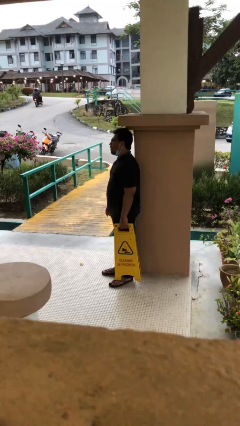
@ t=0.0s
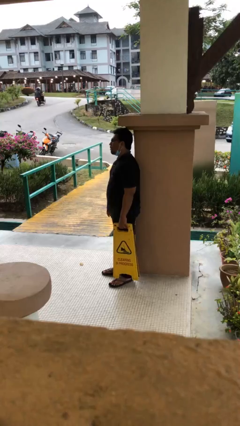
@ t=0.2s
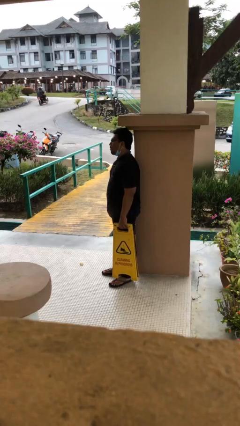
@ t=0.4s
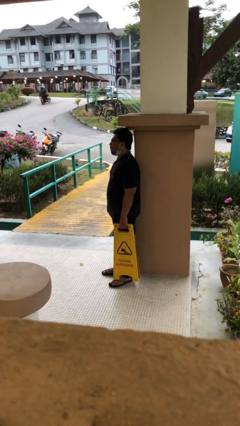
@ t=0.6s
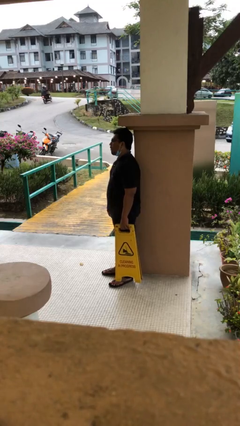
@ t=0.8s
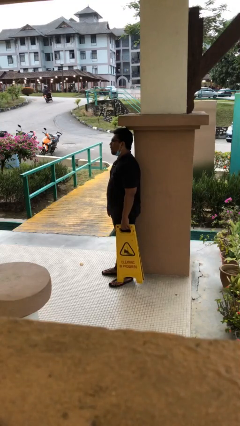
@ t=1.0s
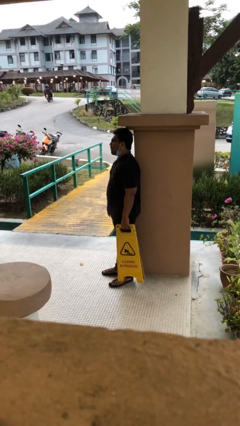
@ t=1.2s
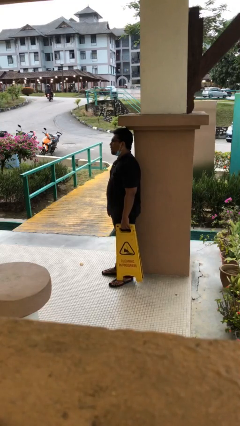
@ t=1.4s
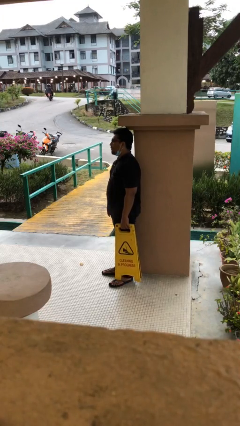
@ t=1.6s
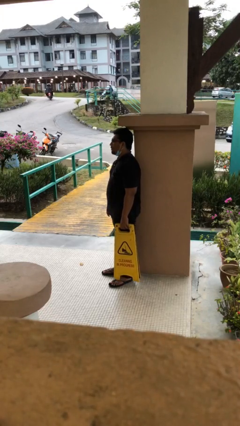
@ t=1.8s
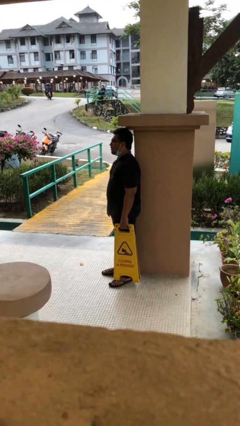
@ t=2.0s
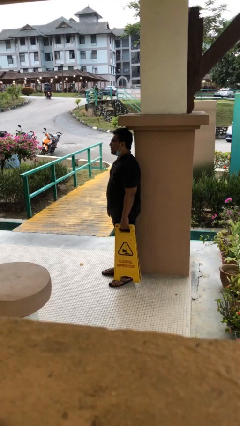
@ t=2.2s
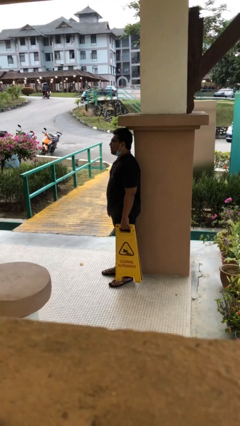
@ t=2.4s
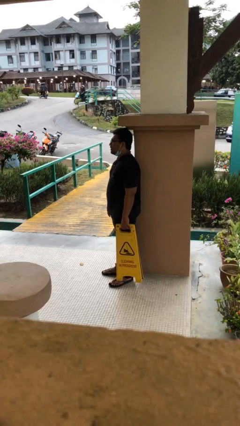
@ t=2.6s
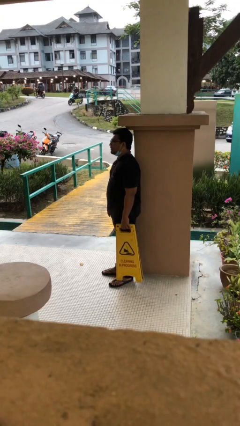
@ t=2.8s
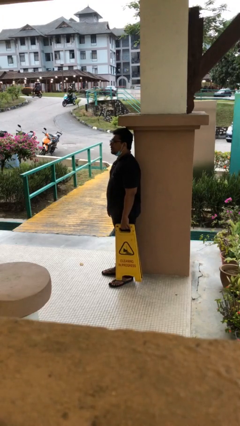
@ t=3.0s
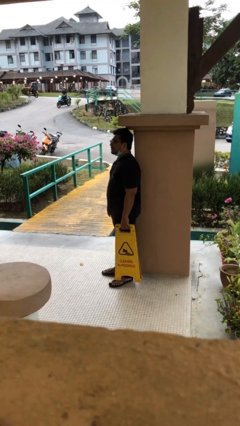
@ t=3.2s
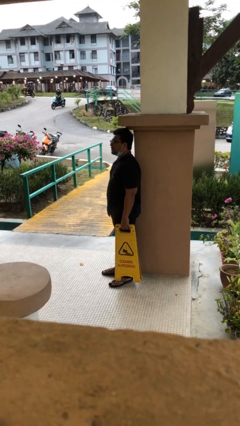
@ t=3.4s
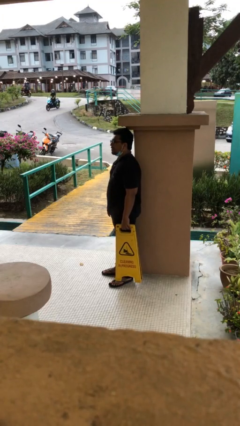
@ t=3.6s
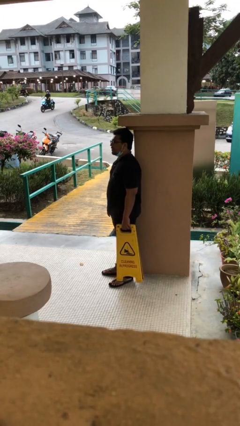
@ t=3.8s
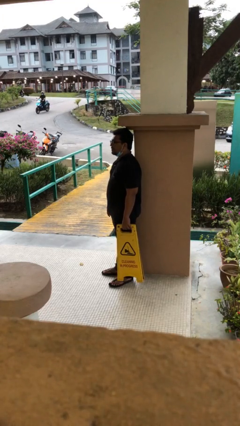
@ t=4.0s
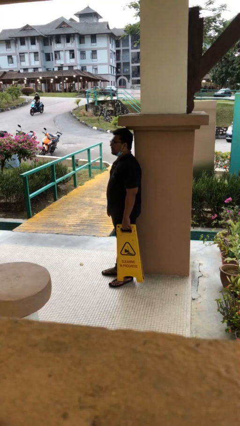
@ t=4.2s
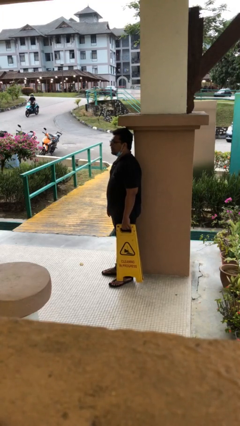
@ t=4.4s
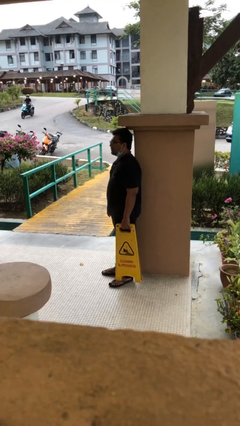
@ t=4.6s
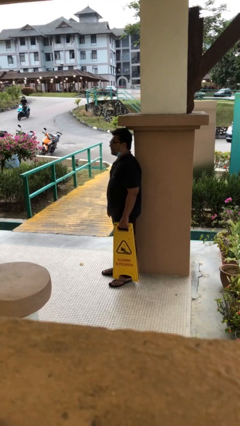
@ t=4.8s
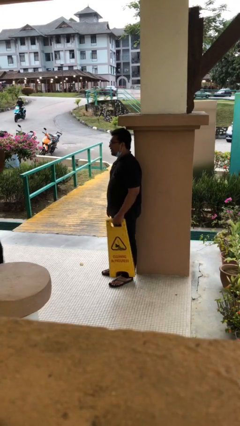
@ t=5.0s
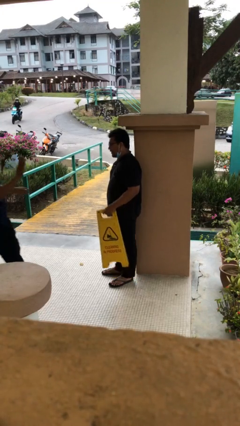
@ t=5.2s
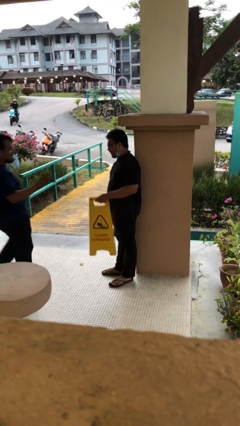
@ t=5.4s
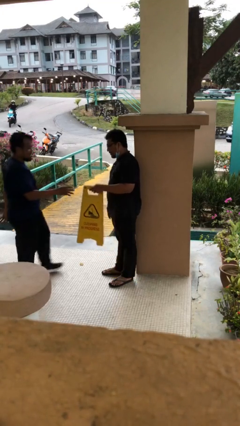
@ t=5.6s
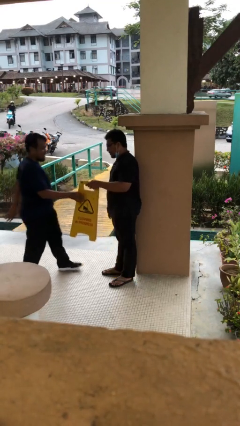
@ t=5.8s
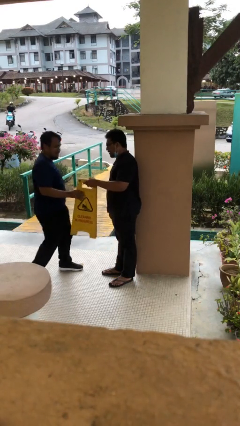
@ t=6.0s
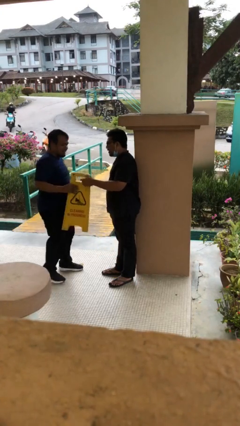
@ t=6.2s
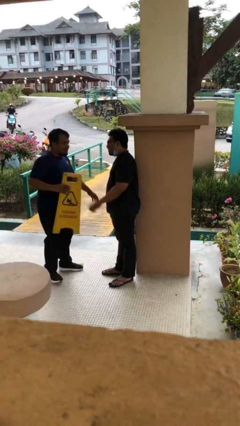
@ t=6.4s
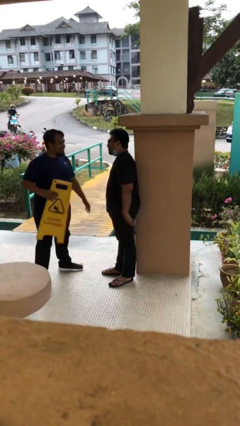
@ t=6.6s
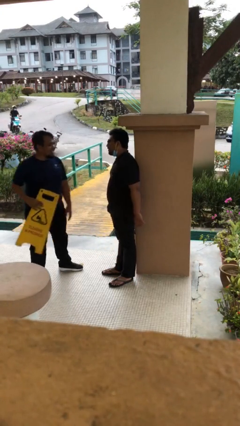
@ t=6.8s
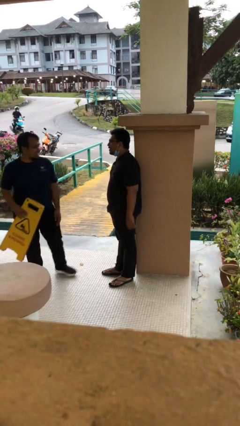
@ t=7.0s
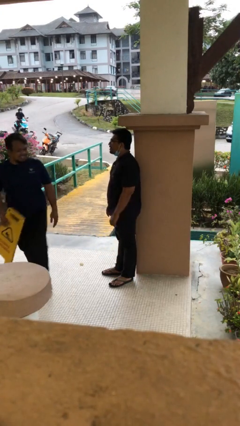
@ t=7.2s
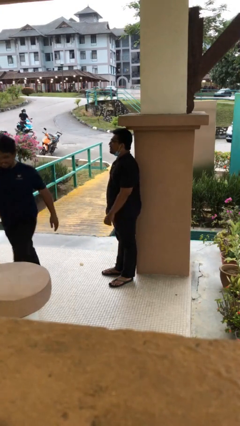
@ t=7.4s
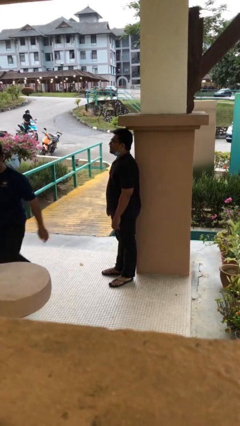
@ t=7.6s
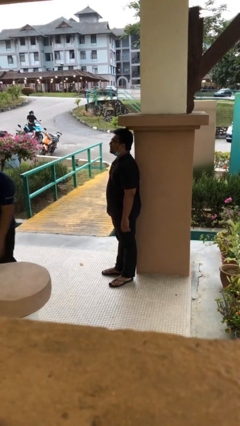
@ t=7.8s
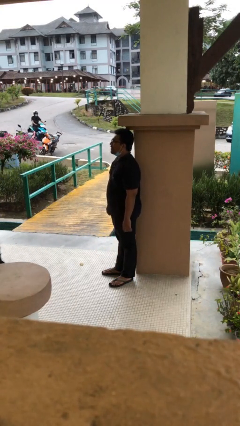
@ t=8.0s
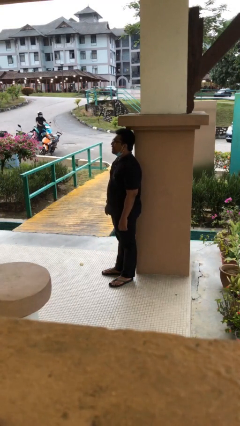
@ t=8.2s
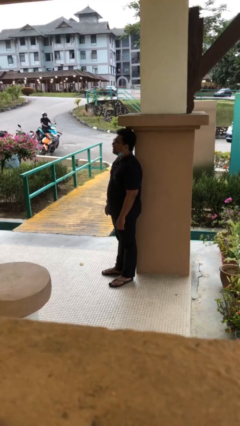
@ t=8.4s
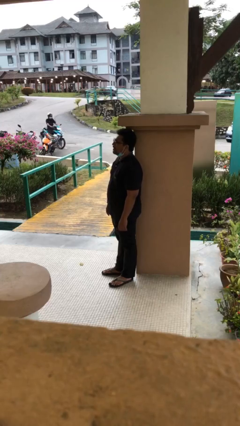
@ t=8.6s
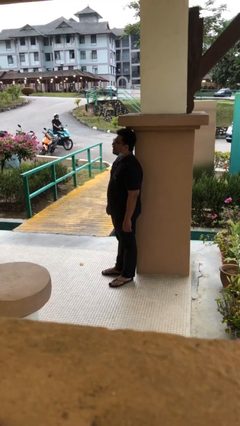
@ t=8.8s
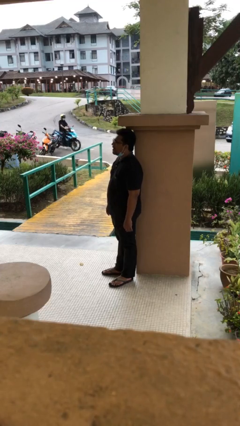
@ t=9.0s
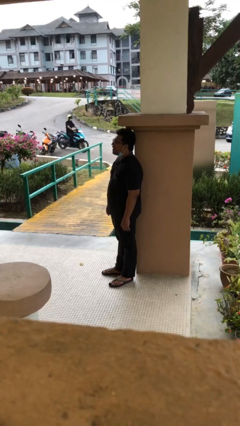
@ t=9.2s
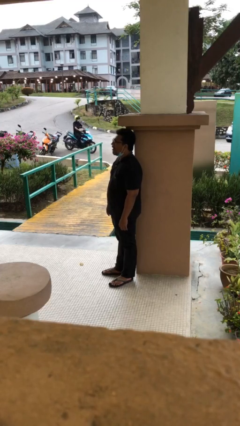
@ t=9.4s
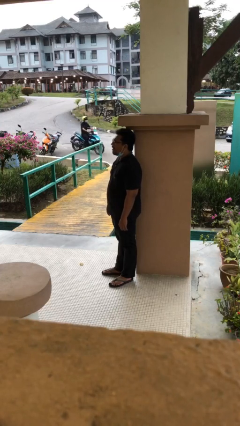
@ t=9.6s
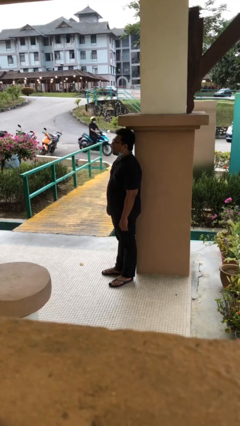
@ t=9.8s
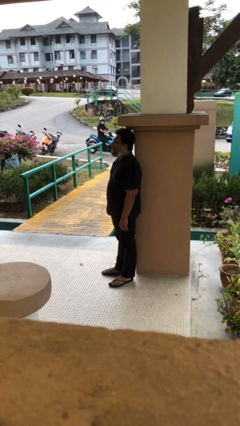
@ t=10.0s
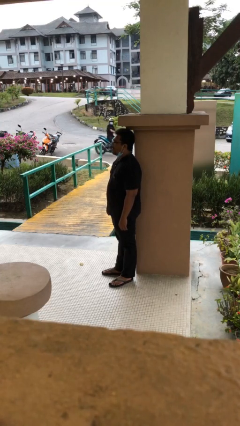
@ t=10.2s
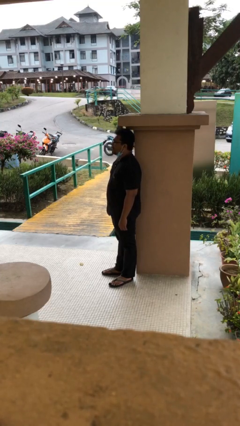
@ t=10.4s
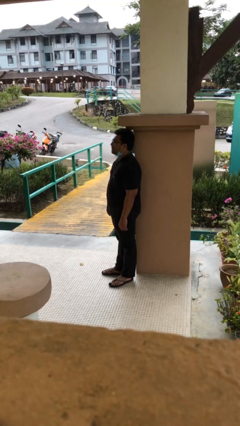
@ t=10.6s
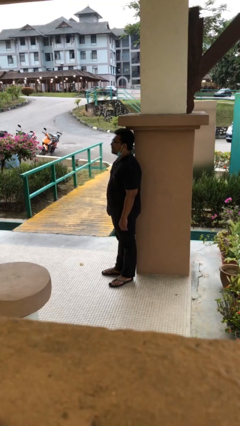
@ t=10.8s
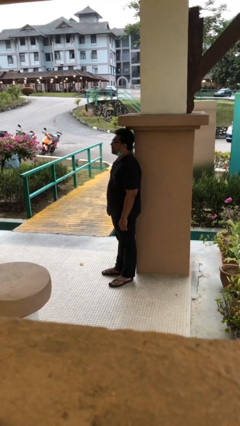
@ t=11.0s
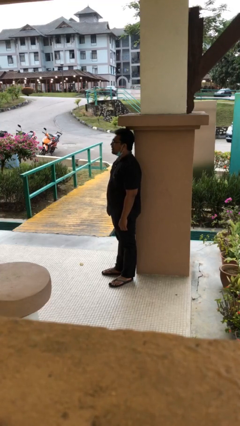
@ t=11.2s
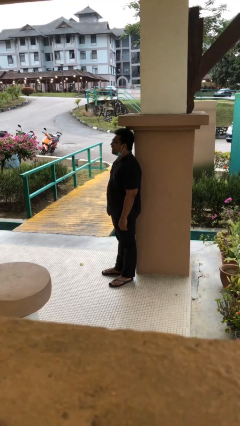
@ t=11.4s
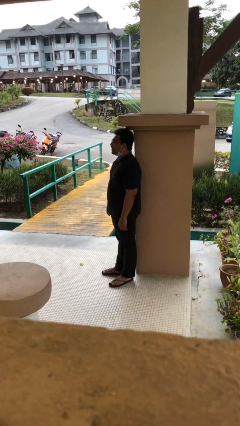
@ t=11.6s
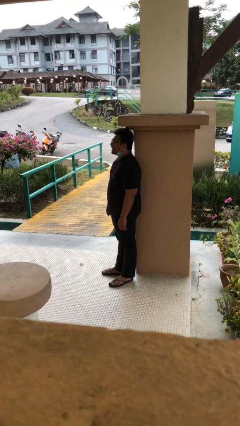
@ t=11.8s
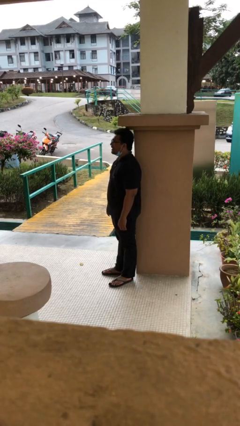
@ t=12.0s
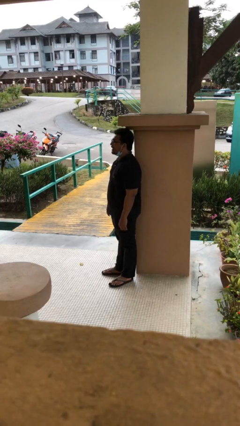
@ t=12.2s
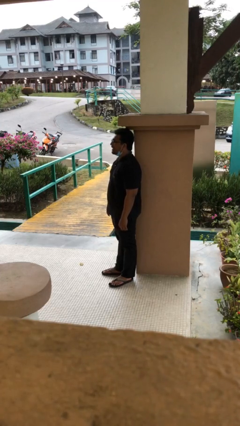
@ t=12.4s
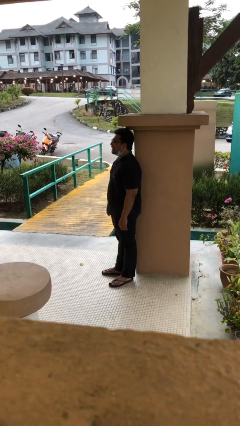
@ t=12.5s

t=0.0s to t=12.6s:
person transfers object to person

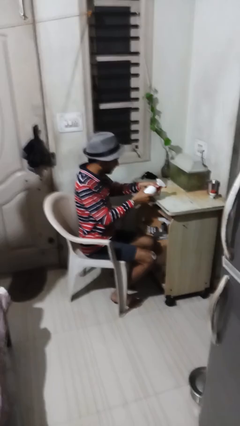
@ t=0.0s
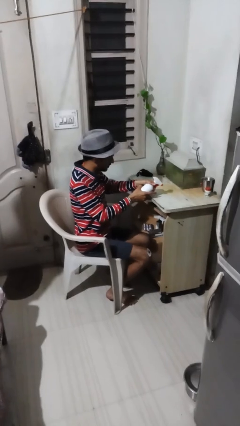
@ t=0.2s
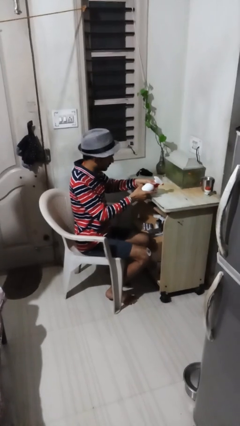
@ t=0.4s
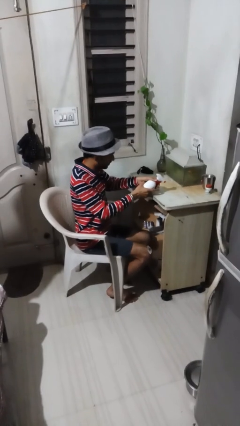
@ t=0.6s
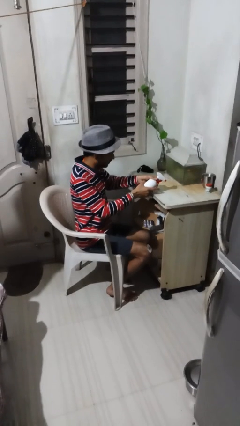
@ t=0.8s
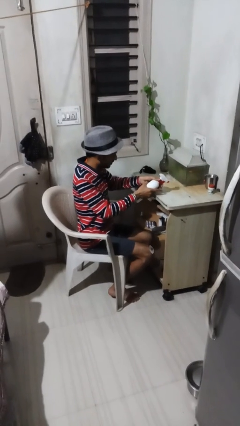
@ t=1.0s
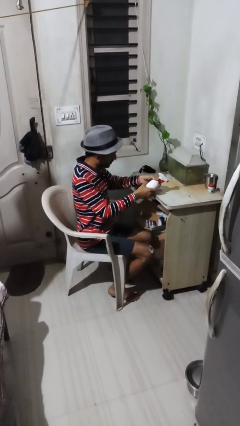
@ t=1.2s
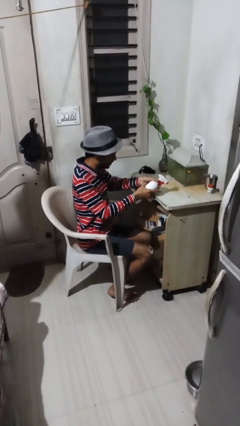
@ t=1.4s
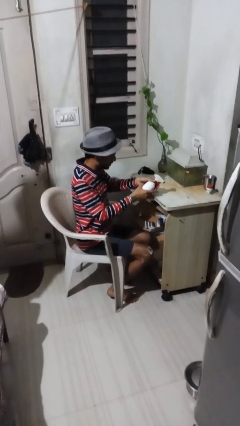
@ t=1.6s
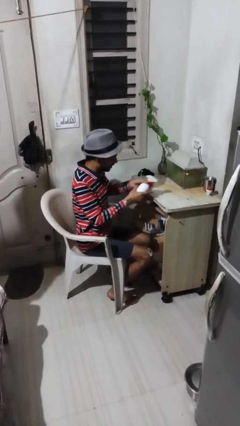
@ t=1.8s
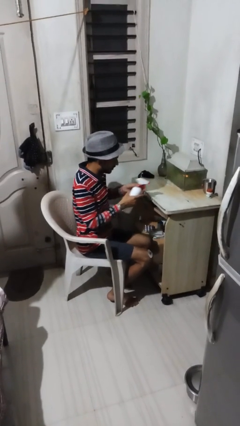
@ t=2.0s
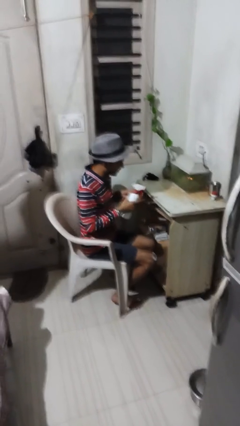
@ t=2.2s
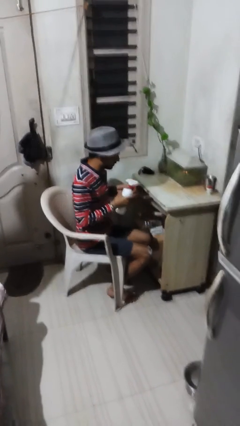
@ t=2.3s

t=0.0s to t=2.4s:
person sprays from bottle

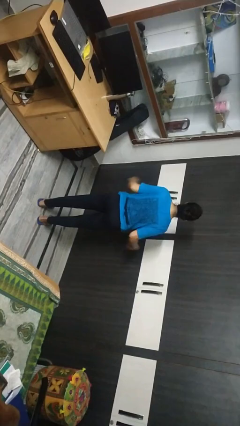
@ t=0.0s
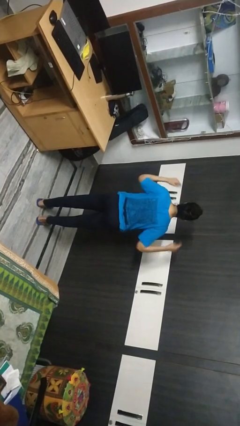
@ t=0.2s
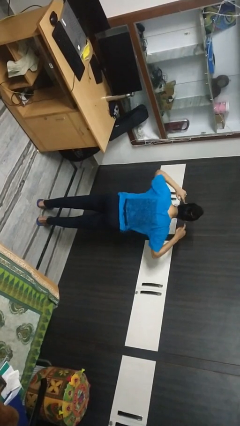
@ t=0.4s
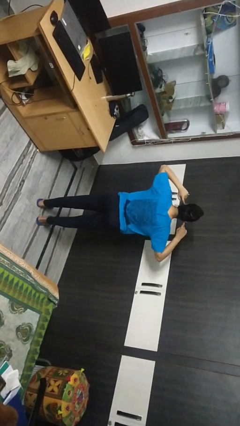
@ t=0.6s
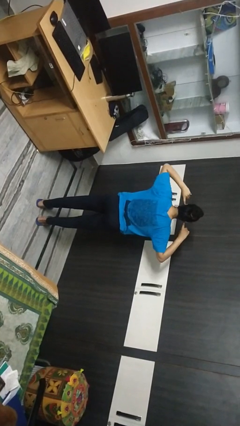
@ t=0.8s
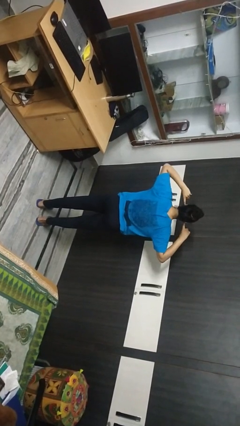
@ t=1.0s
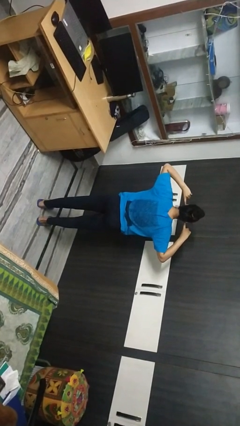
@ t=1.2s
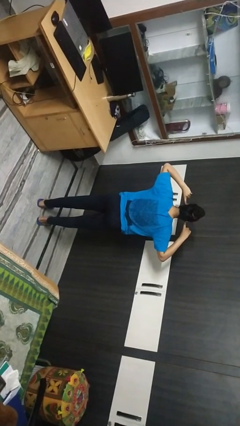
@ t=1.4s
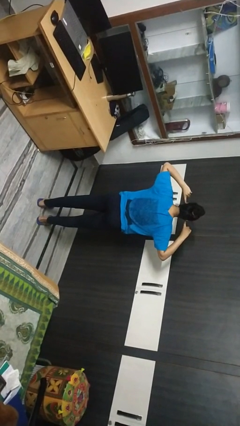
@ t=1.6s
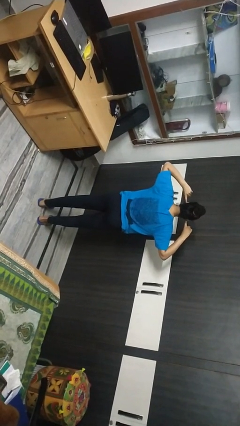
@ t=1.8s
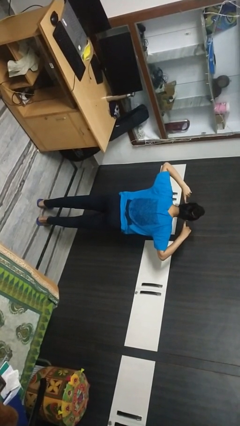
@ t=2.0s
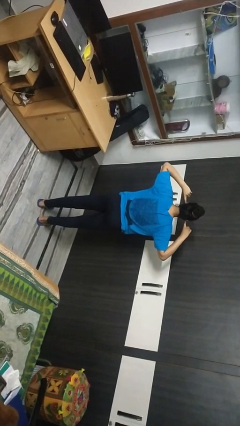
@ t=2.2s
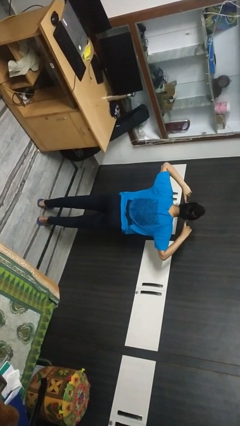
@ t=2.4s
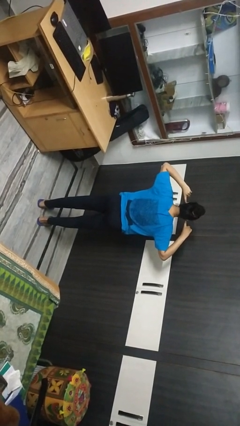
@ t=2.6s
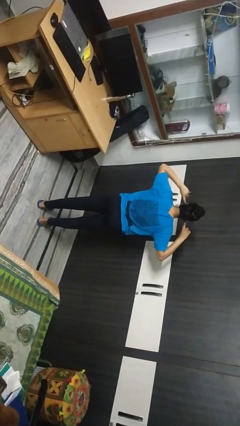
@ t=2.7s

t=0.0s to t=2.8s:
person puts fingers in ear

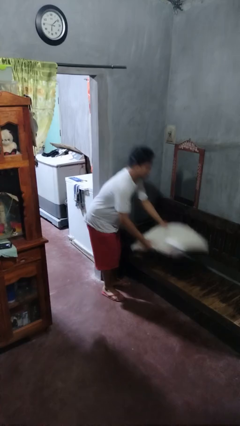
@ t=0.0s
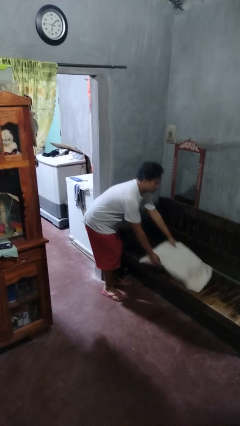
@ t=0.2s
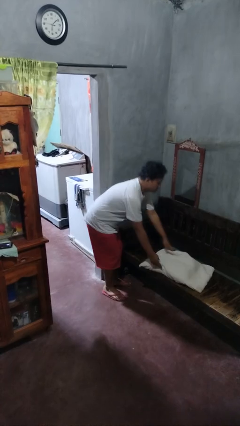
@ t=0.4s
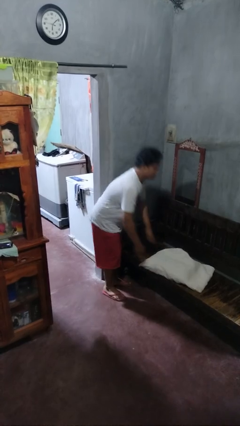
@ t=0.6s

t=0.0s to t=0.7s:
person puts down object on couch
